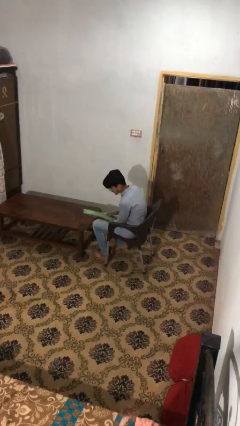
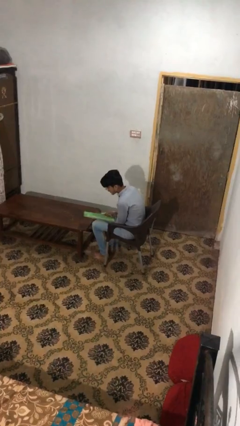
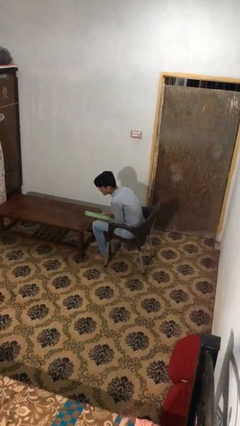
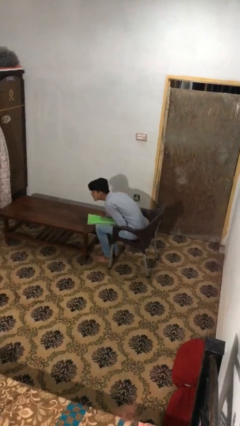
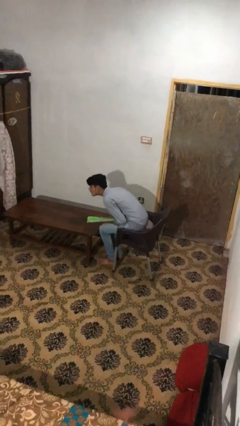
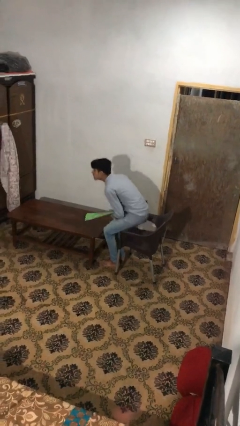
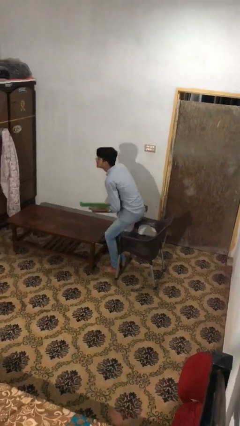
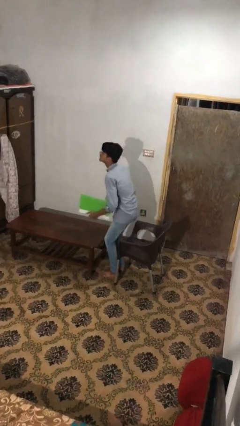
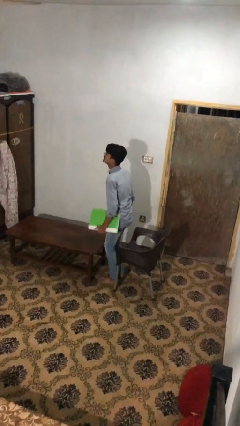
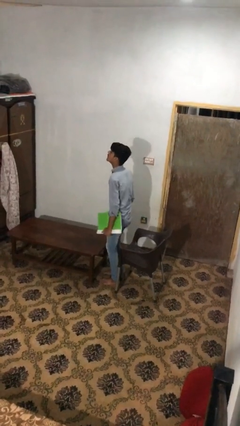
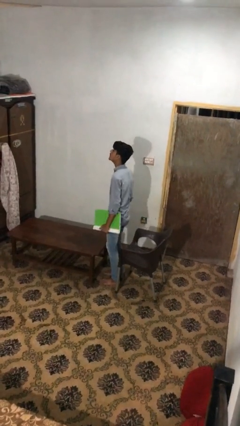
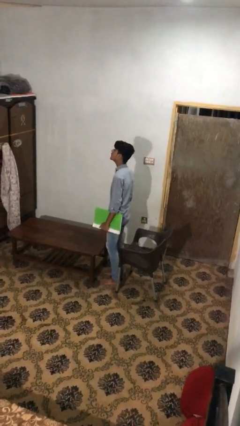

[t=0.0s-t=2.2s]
person stands up

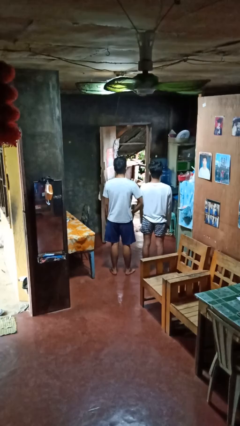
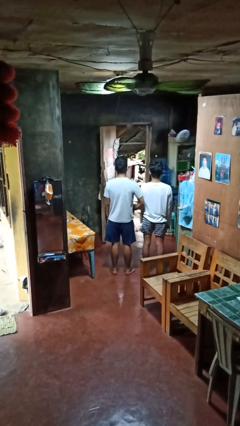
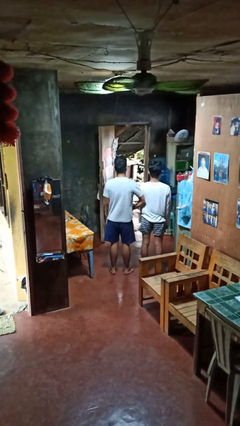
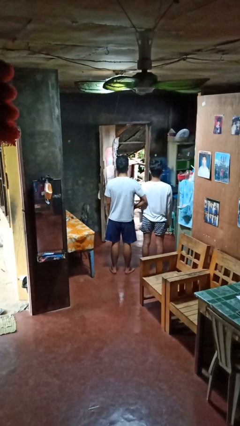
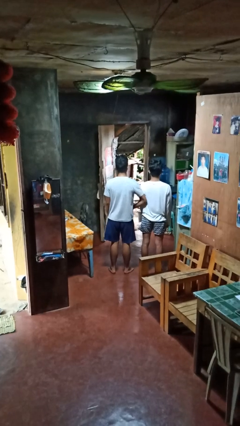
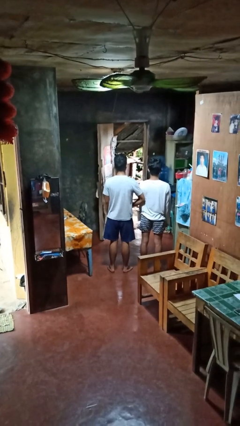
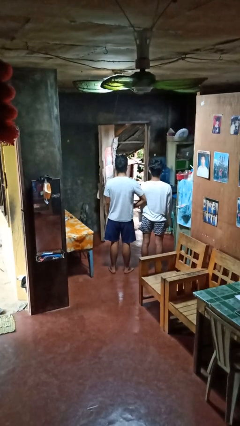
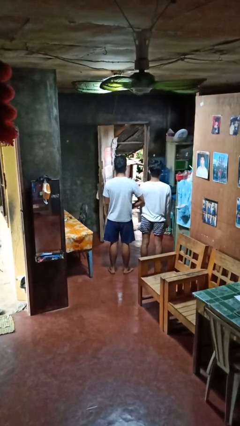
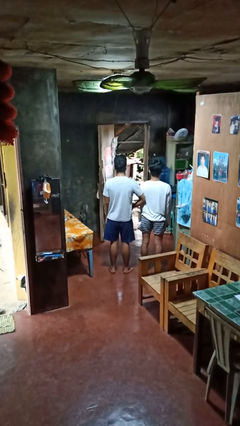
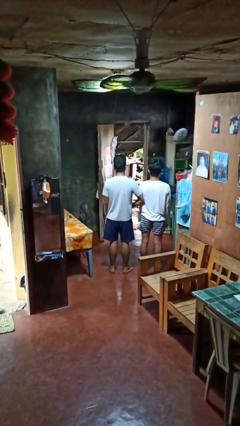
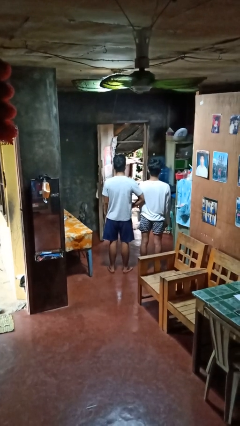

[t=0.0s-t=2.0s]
person nudges person with elbow

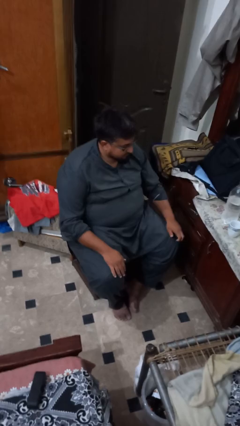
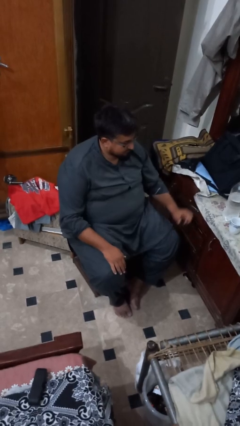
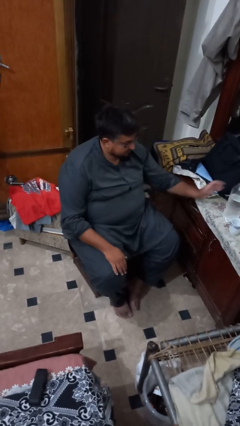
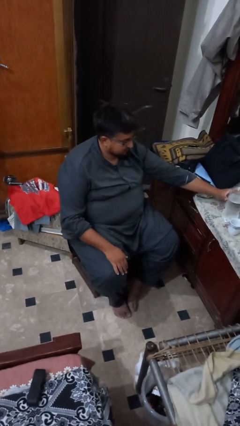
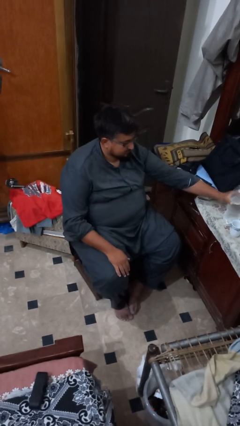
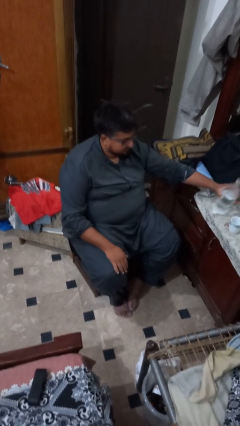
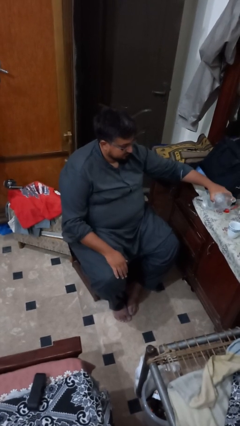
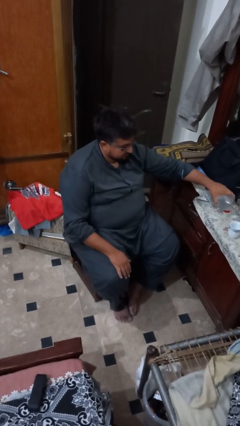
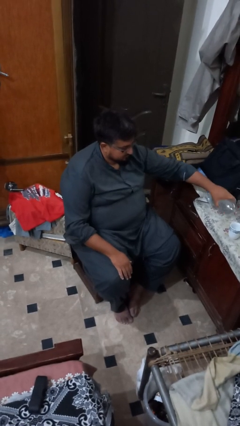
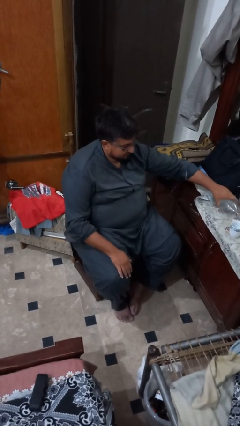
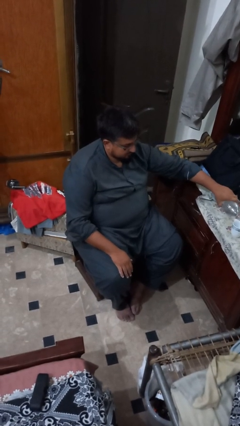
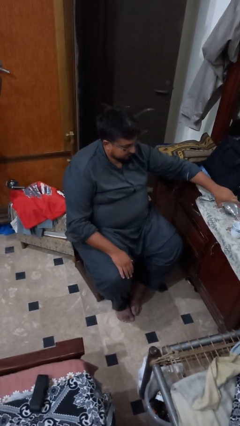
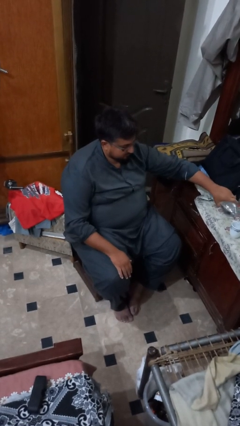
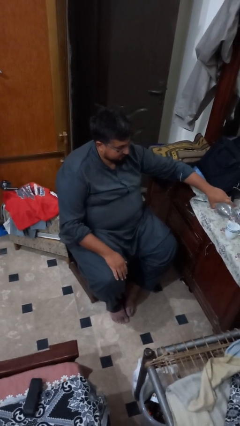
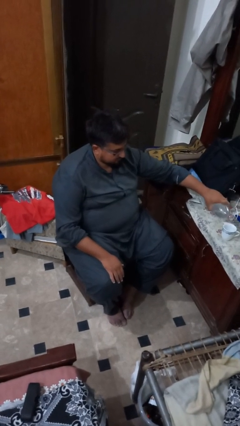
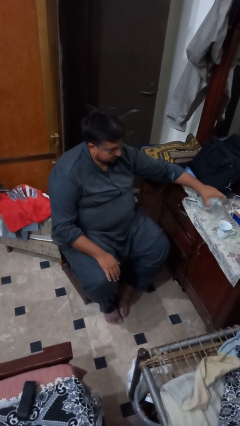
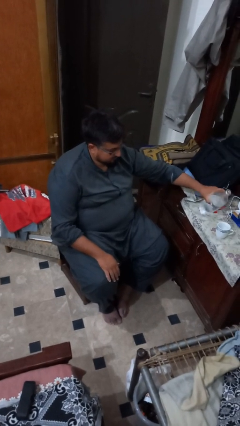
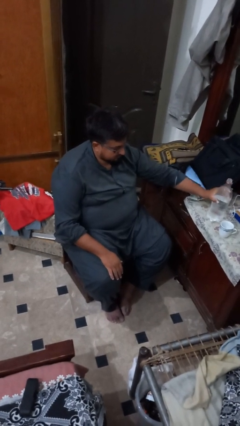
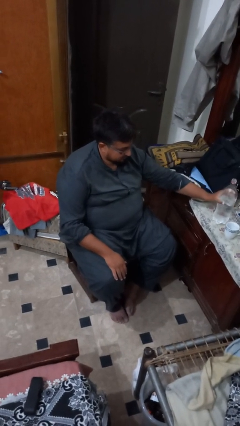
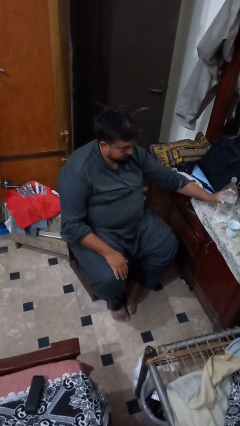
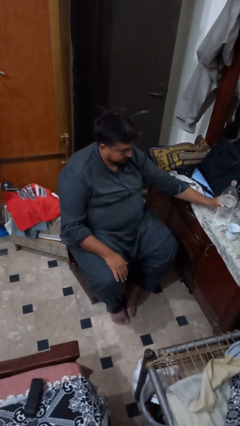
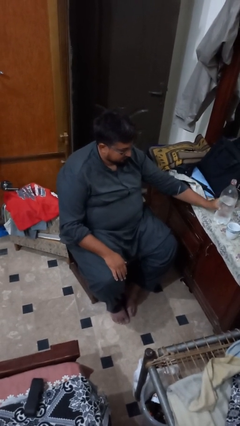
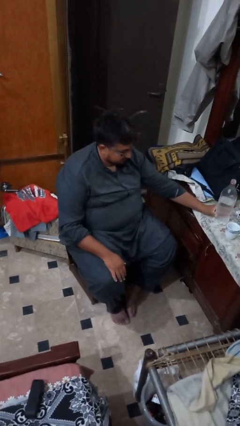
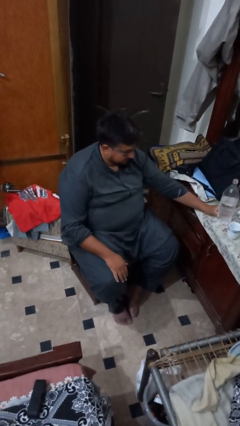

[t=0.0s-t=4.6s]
person pours liquid into cup

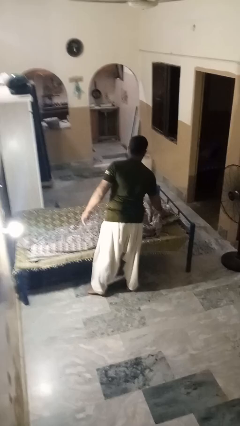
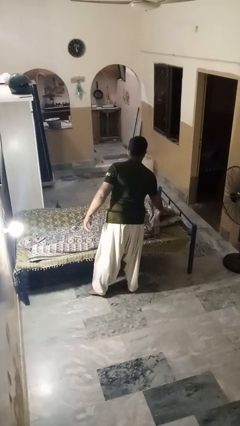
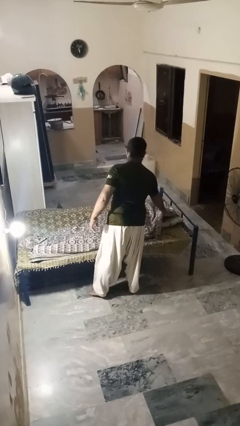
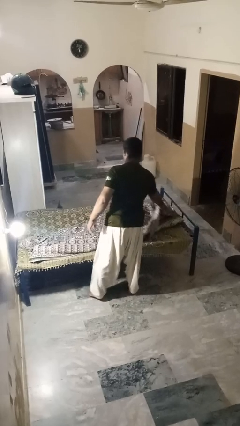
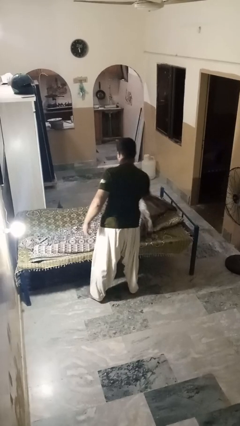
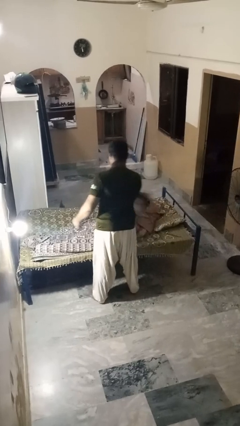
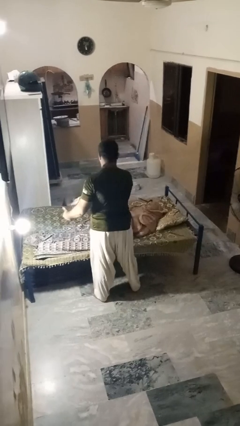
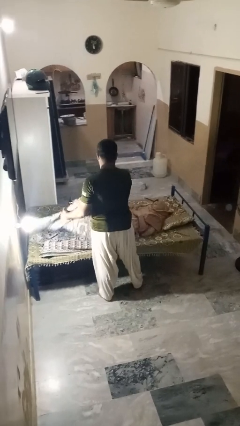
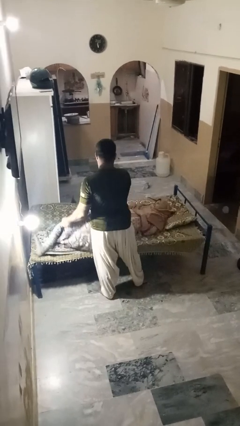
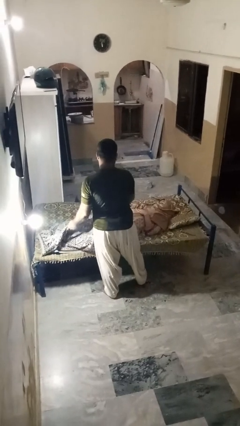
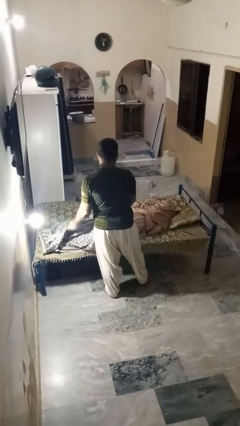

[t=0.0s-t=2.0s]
person uncovers friend with blanket

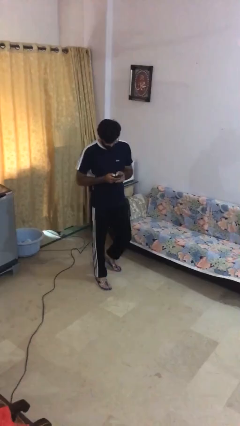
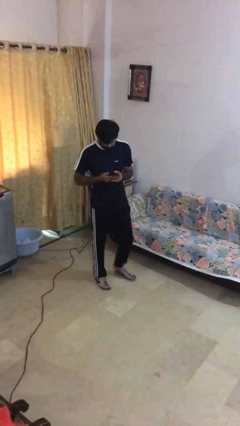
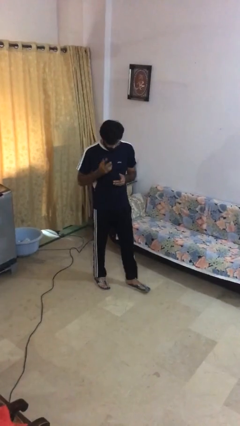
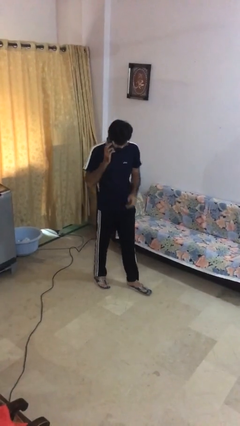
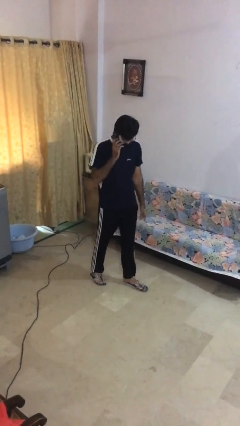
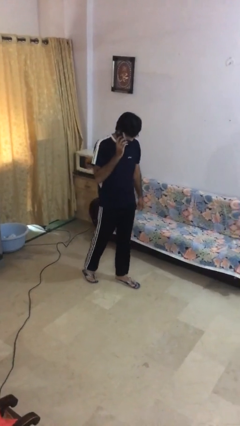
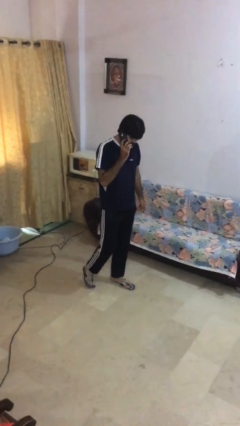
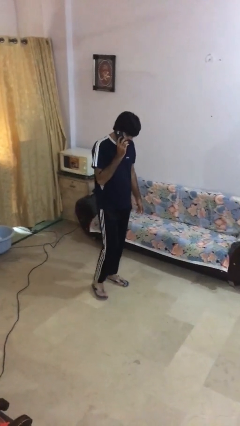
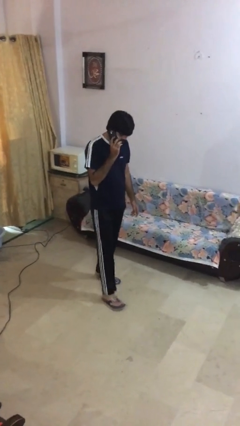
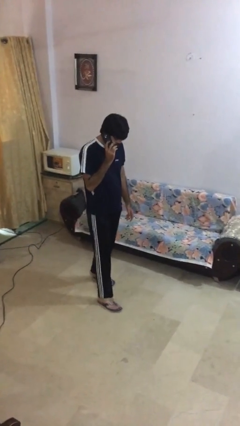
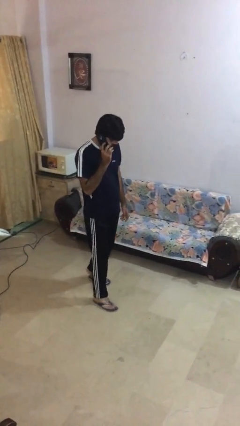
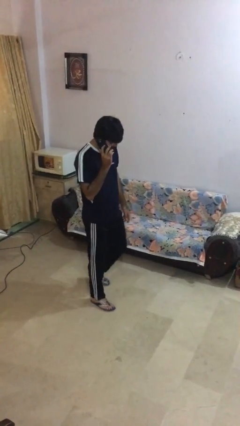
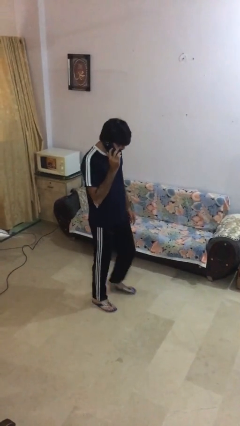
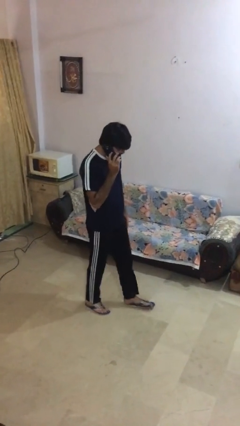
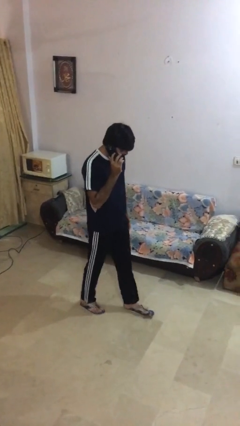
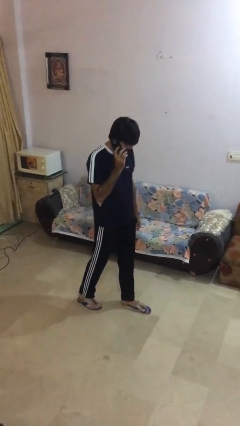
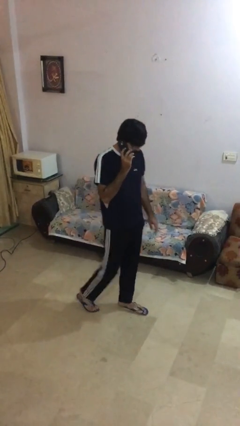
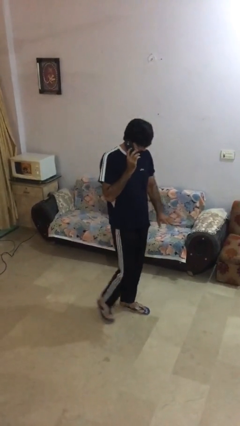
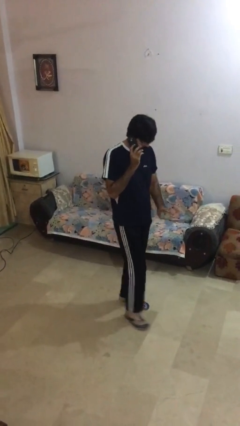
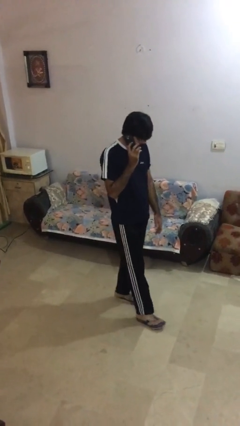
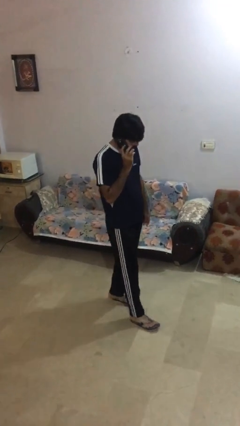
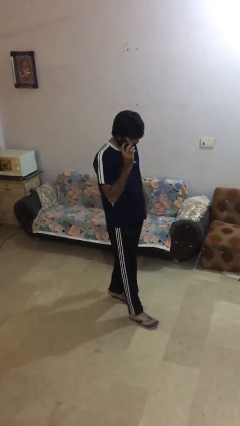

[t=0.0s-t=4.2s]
person talks on phone

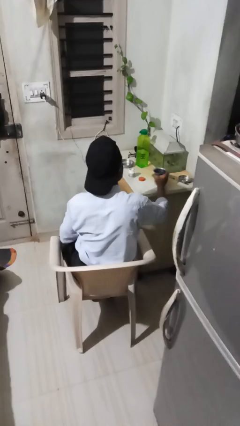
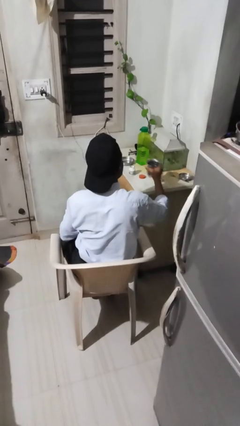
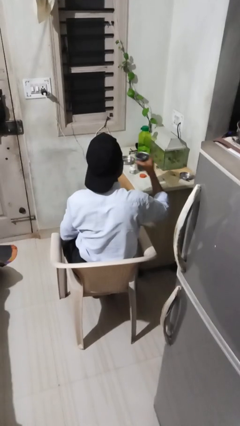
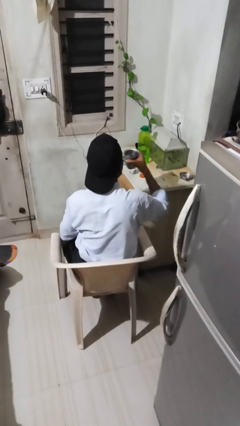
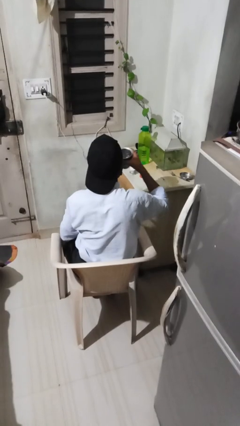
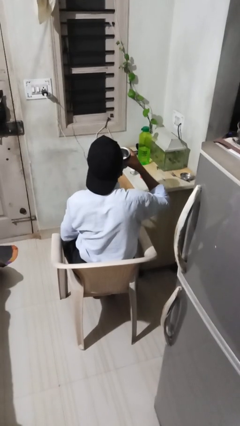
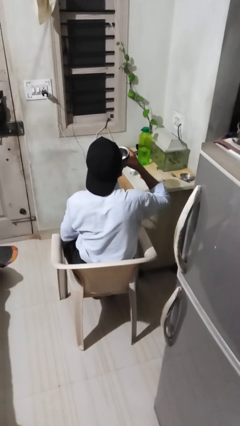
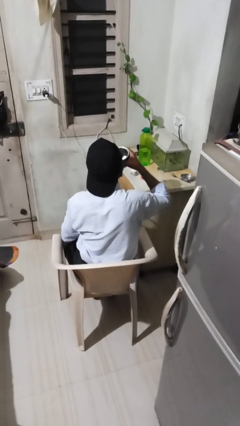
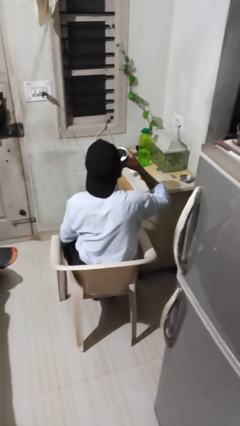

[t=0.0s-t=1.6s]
person drinks from cup

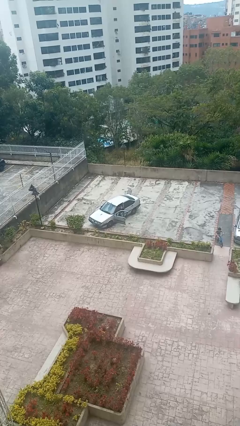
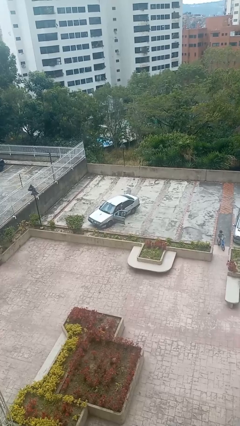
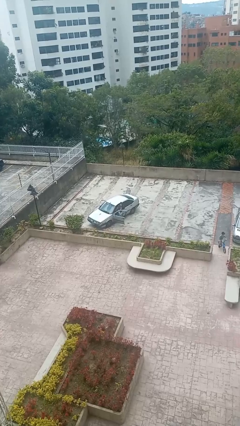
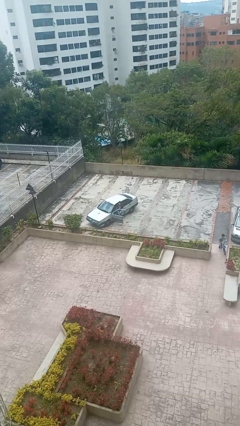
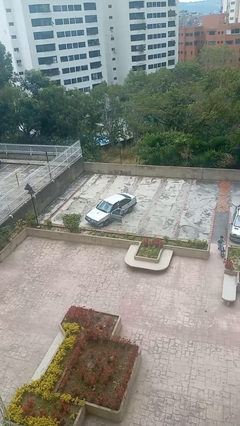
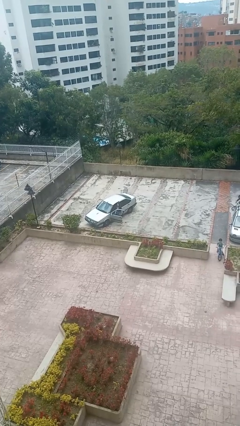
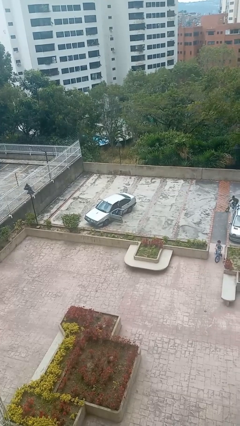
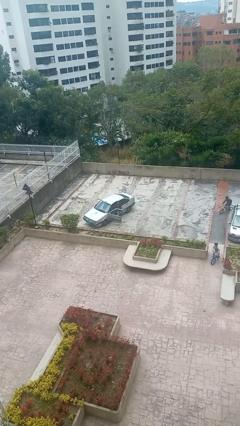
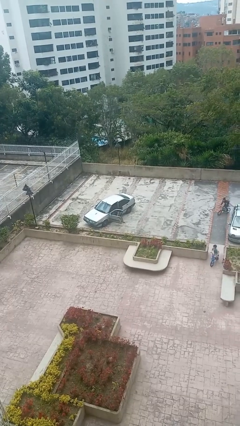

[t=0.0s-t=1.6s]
person exits car
